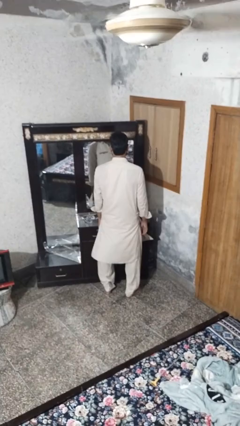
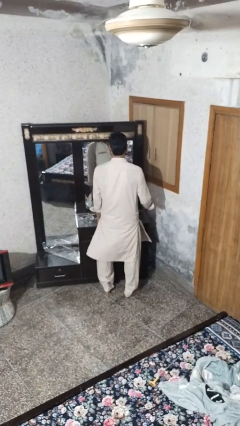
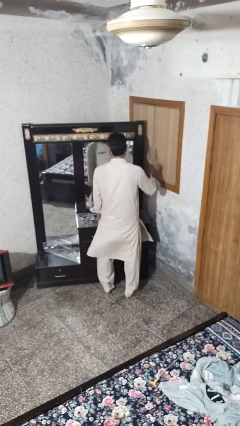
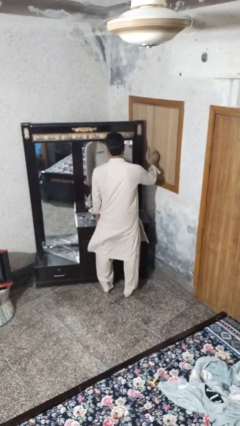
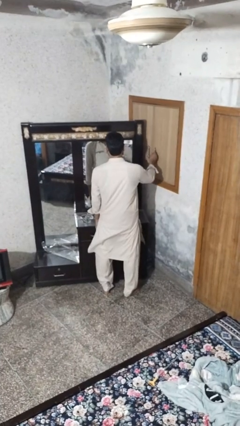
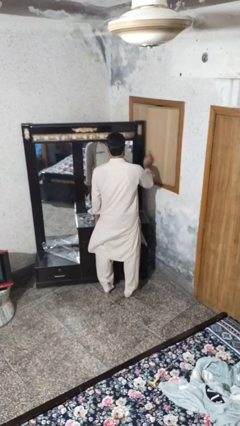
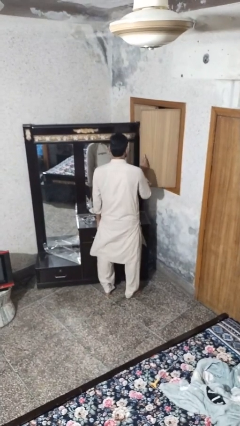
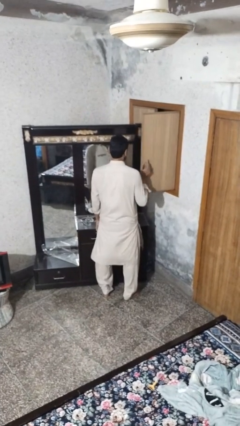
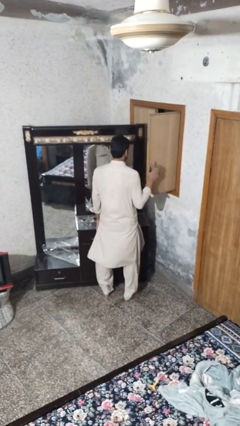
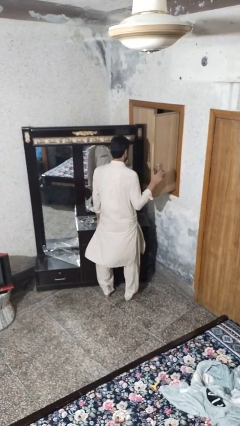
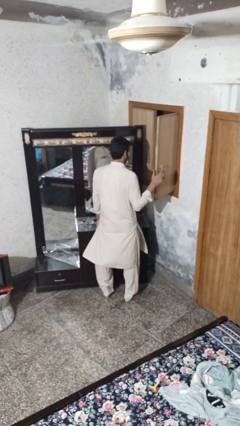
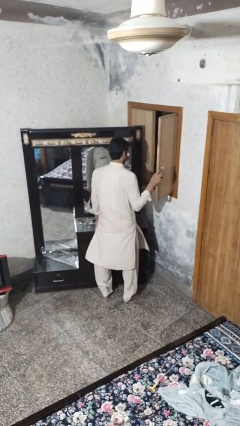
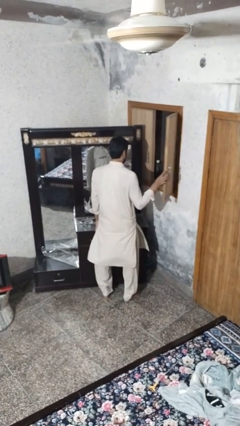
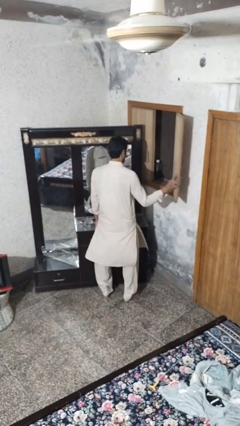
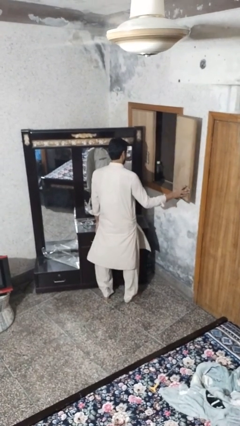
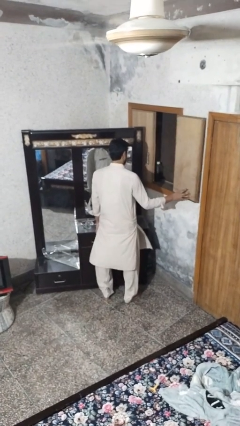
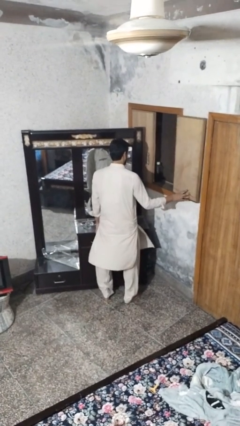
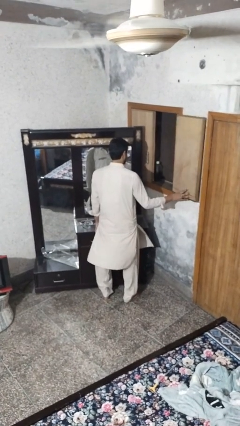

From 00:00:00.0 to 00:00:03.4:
person opens home window

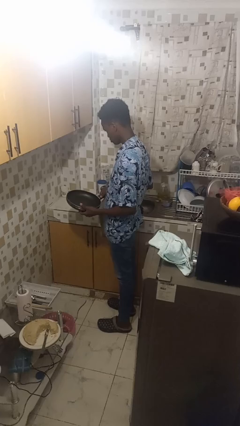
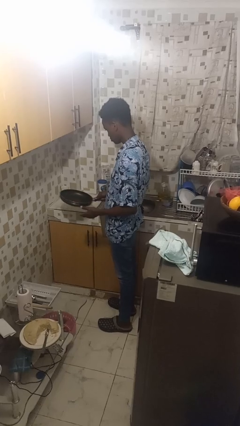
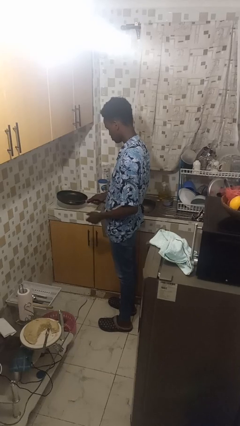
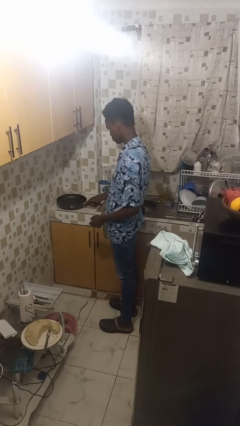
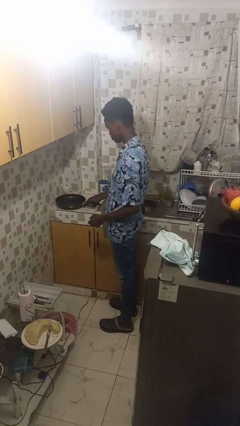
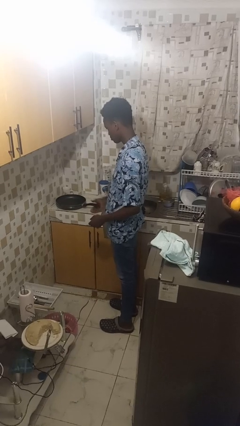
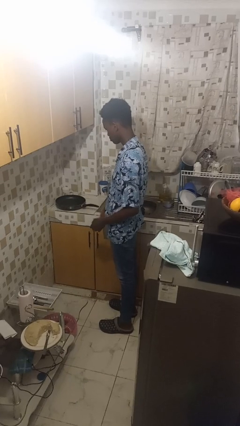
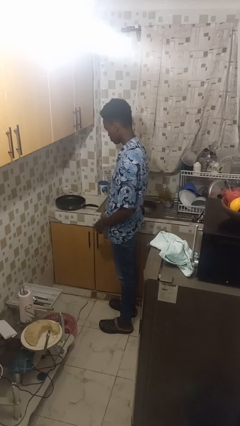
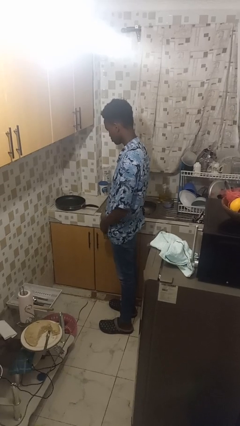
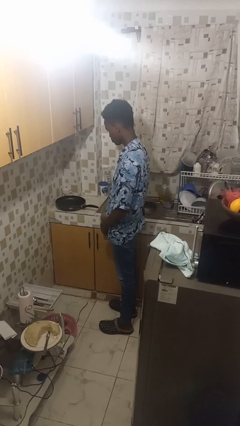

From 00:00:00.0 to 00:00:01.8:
person puts down object on countertop

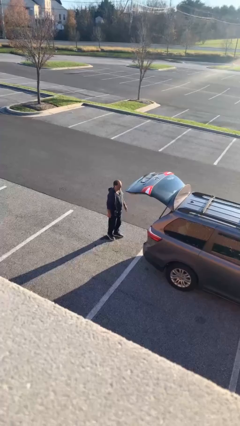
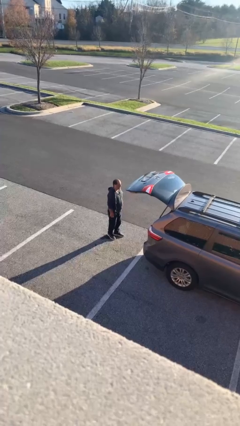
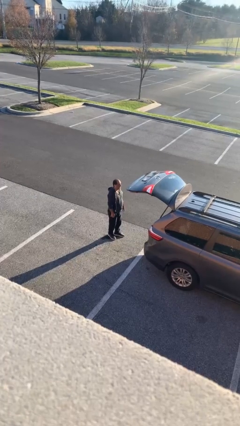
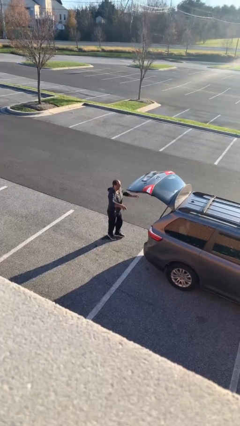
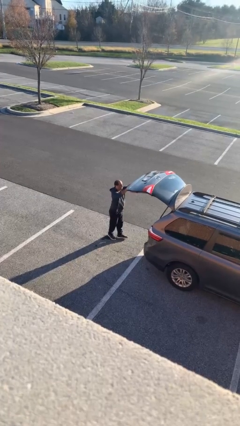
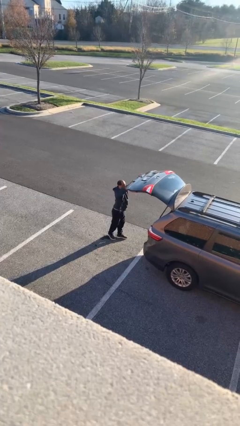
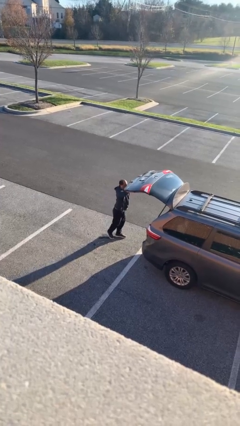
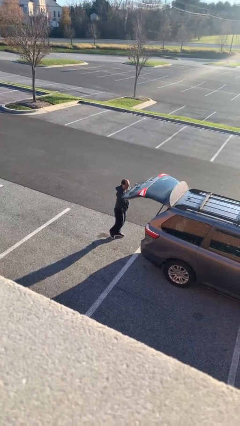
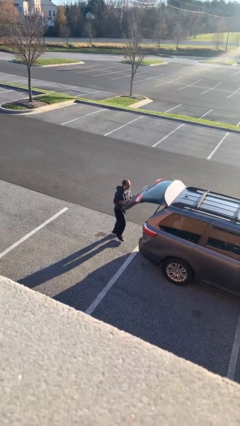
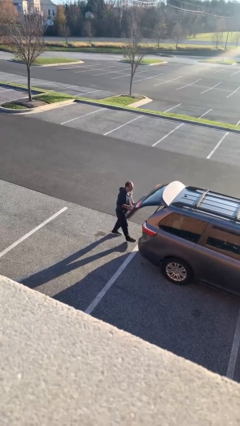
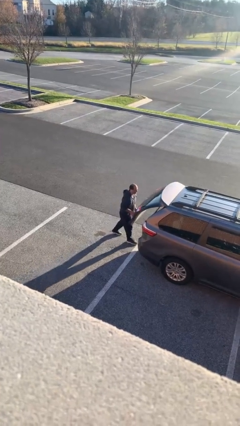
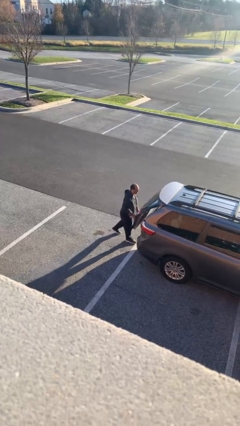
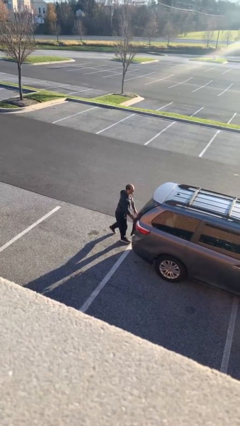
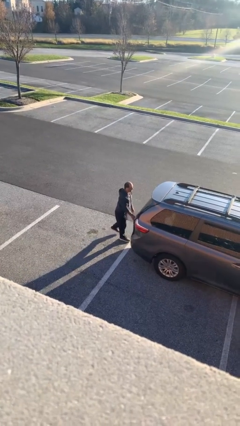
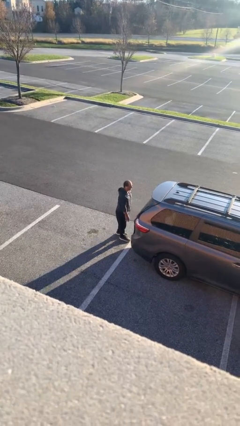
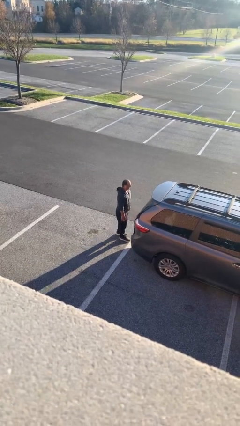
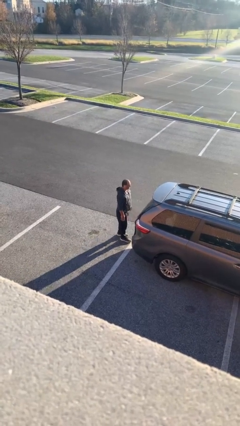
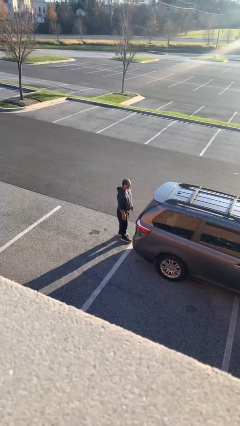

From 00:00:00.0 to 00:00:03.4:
person closes car trunk

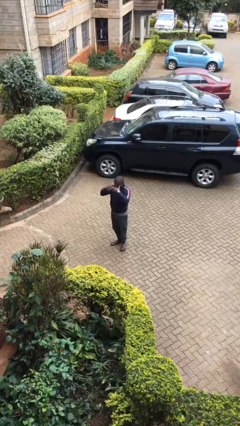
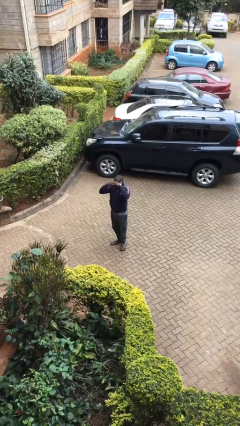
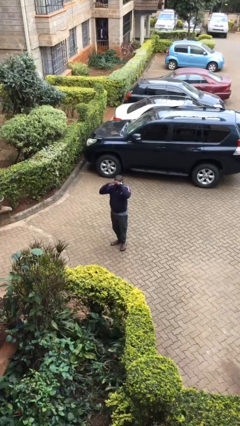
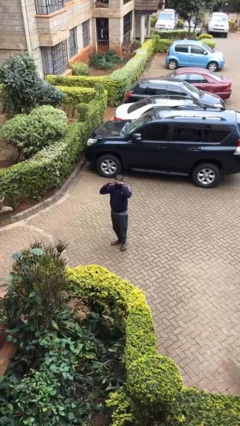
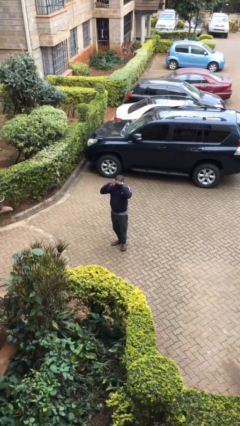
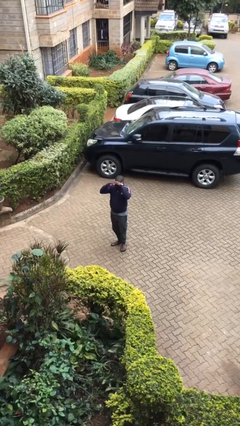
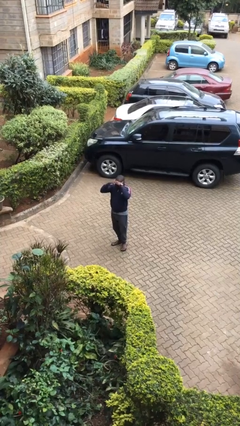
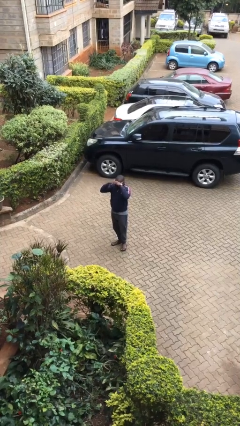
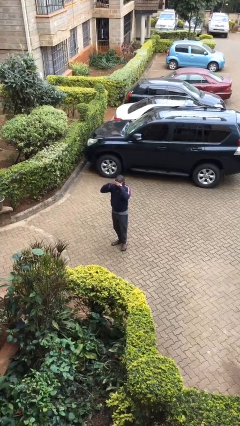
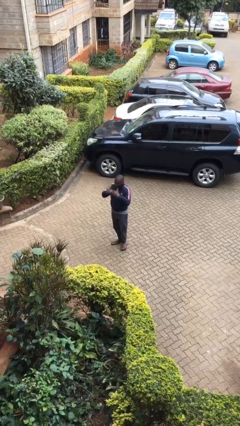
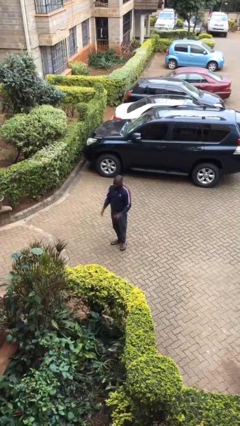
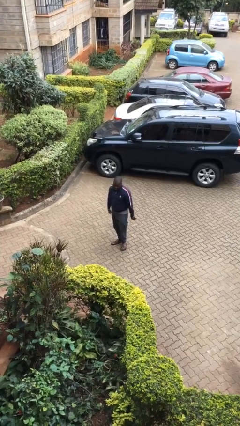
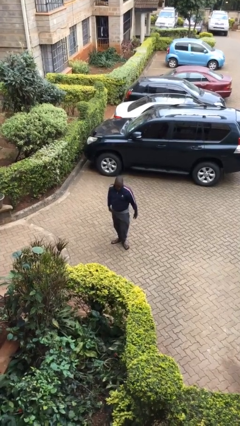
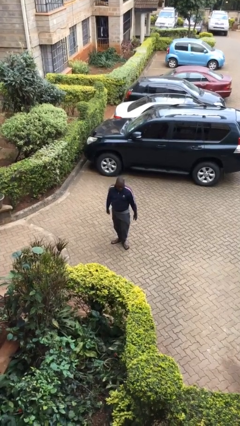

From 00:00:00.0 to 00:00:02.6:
person shades eyes

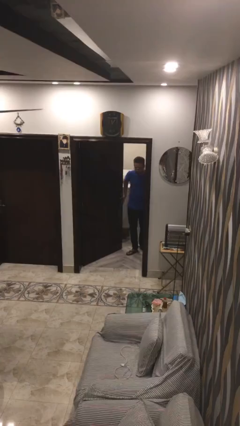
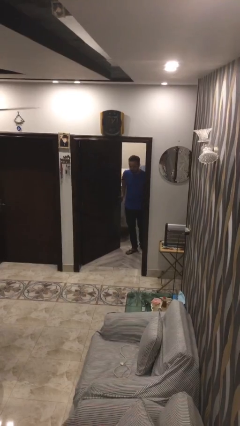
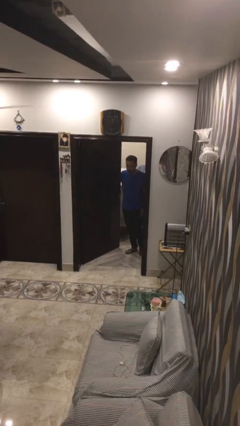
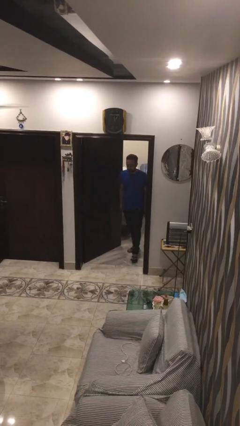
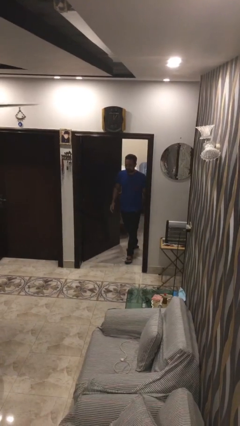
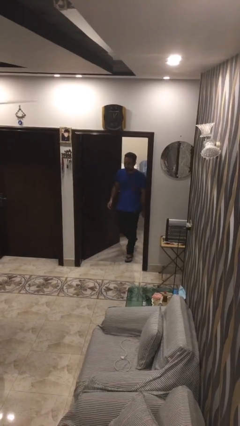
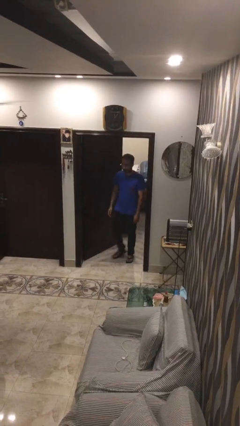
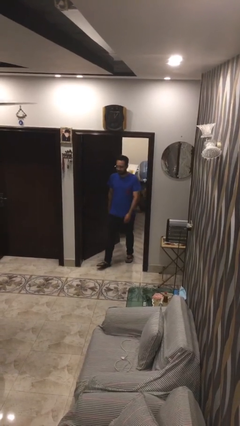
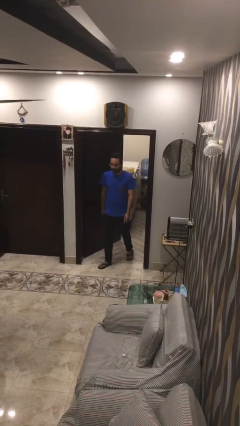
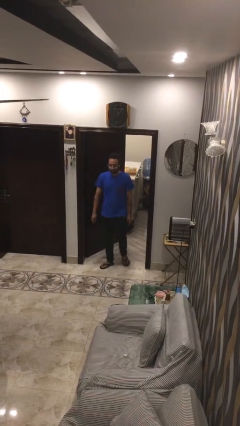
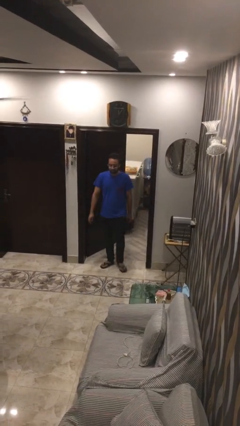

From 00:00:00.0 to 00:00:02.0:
person enters scene through structure

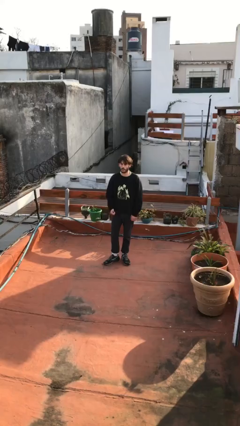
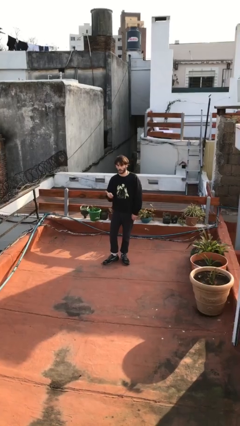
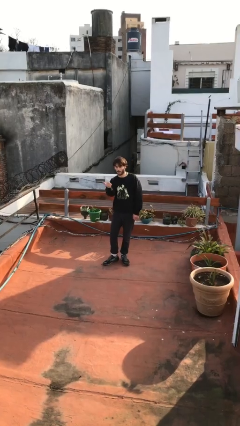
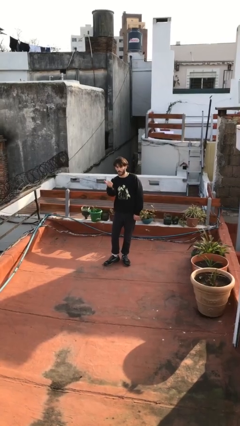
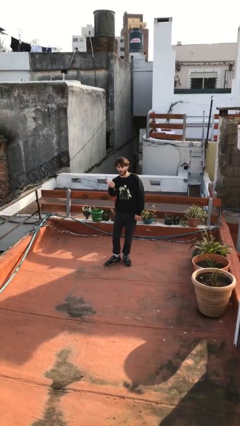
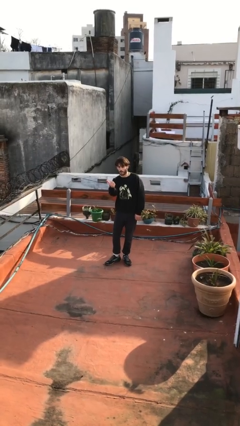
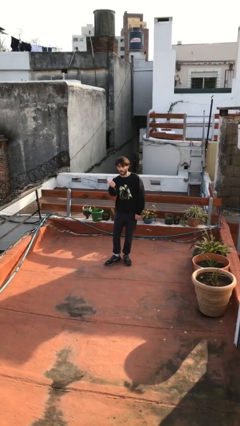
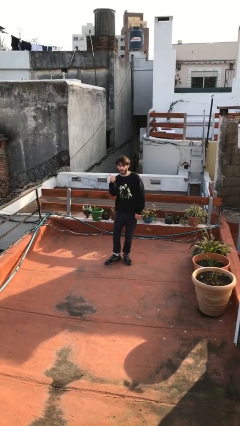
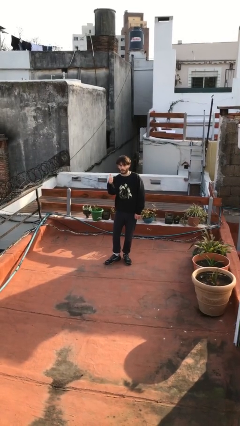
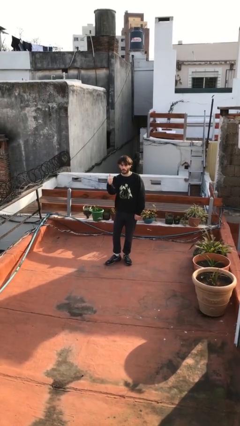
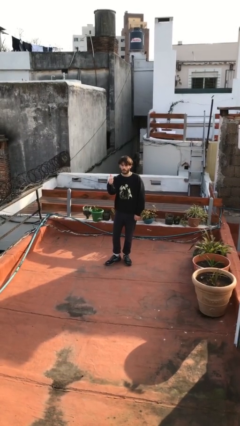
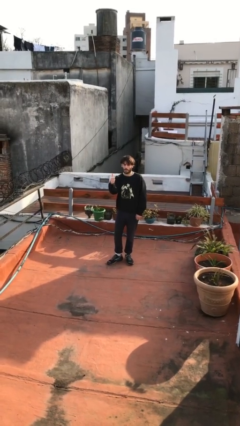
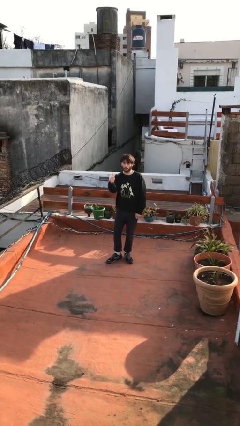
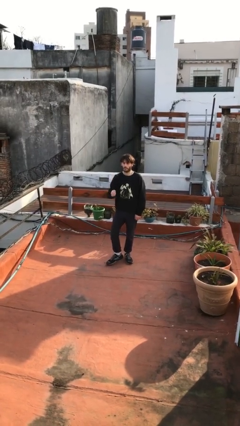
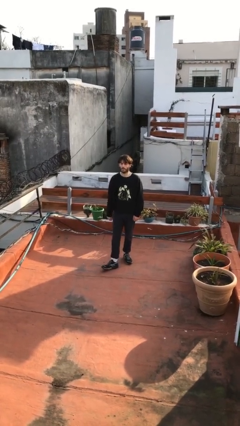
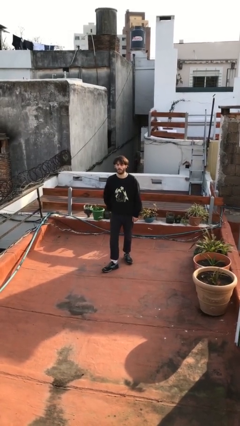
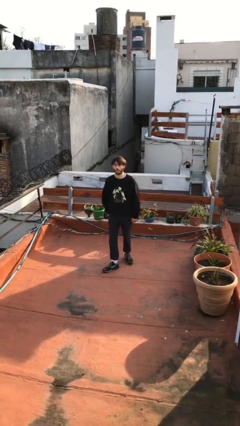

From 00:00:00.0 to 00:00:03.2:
person gestures thumbs up

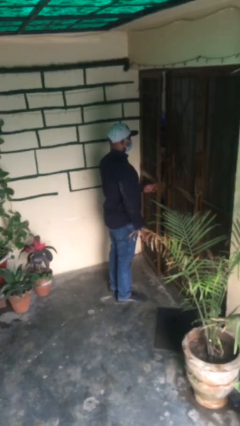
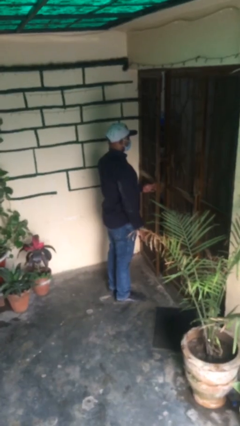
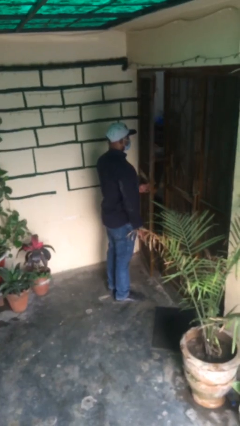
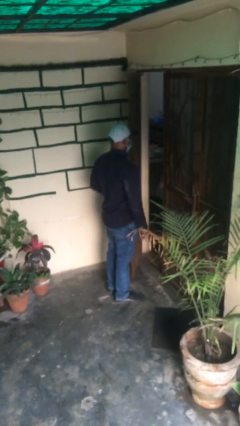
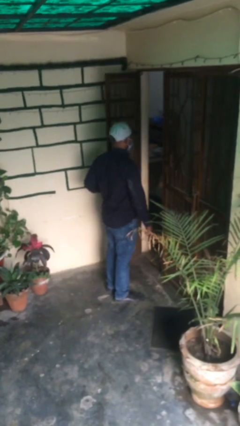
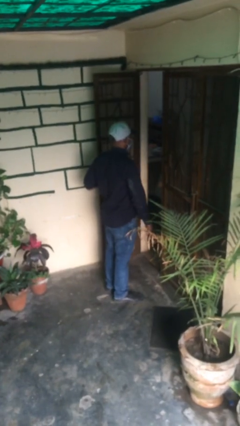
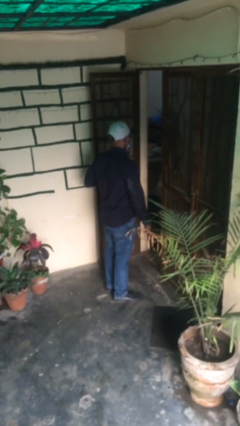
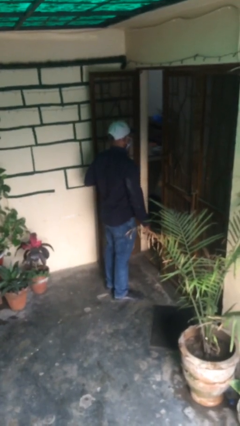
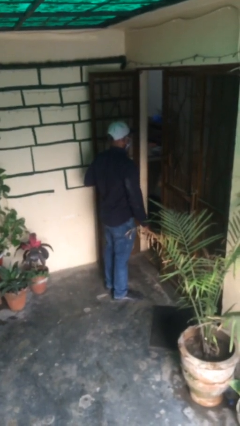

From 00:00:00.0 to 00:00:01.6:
person opens facility door
